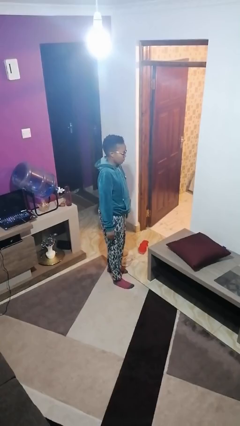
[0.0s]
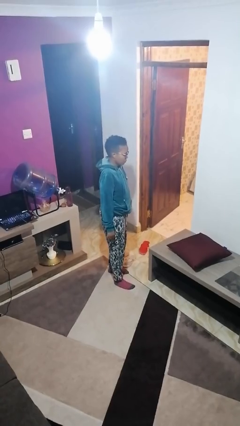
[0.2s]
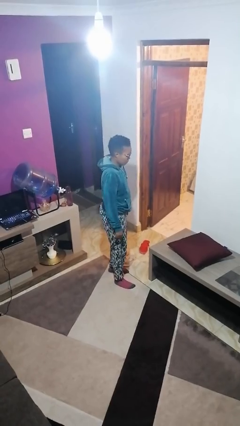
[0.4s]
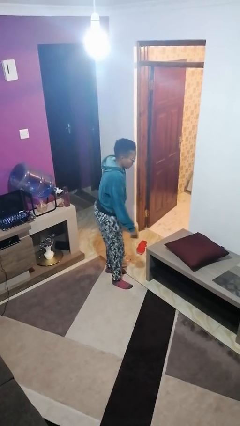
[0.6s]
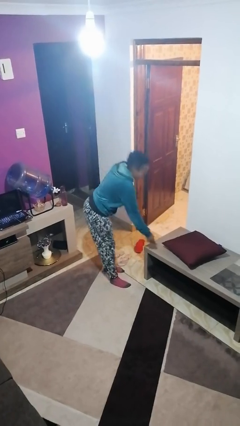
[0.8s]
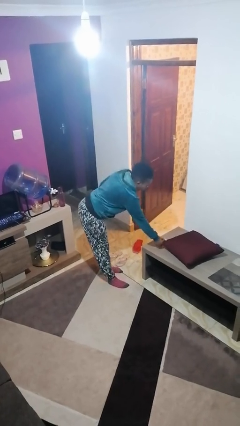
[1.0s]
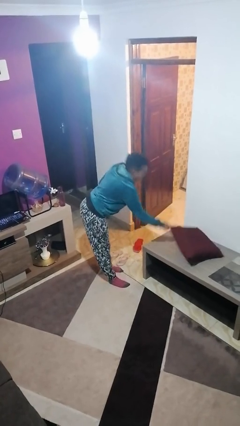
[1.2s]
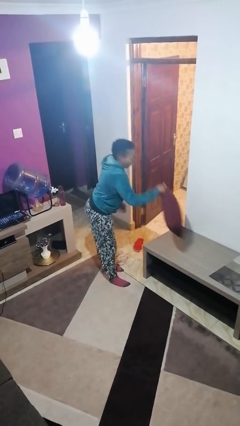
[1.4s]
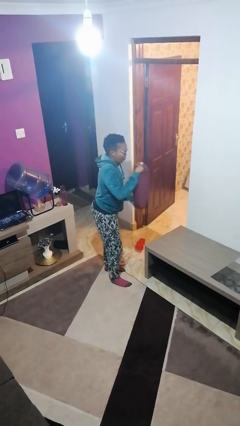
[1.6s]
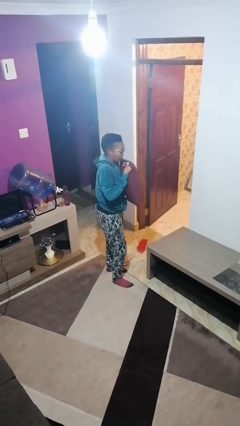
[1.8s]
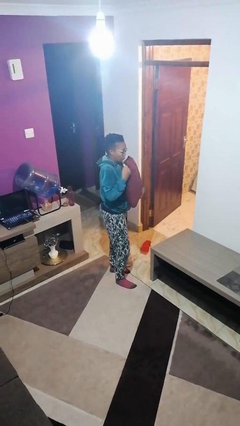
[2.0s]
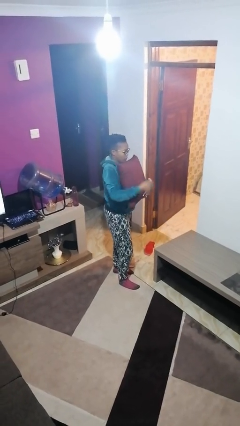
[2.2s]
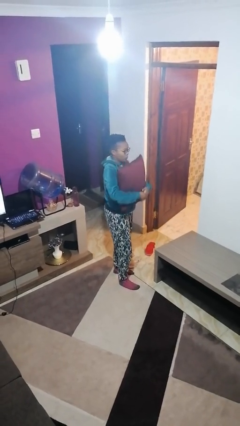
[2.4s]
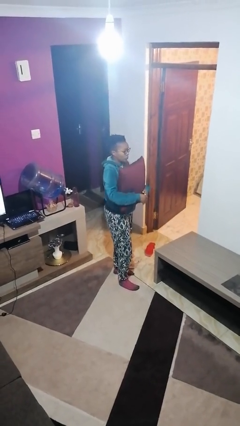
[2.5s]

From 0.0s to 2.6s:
person picks up object from table

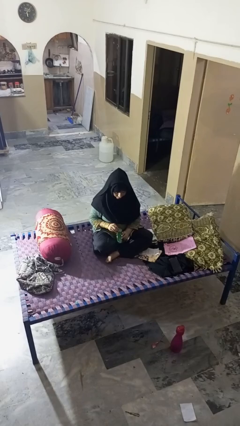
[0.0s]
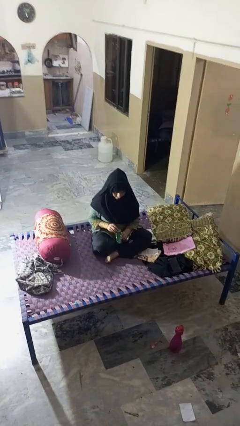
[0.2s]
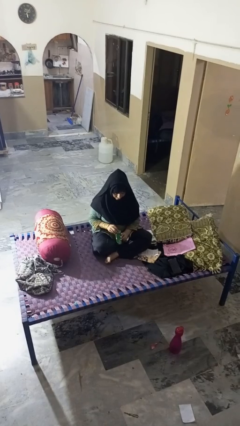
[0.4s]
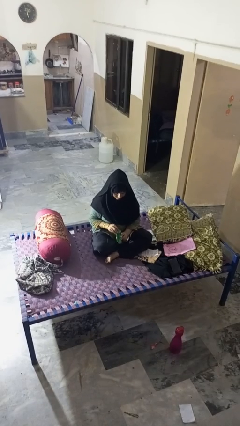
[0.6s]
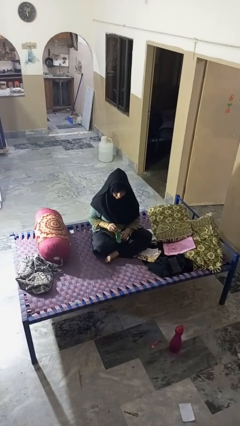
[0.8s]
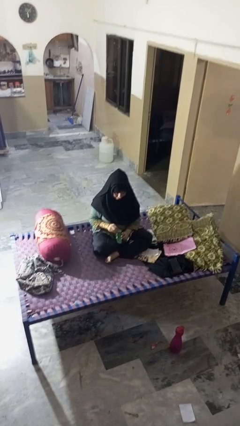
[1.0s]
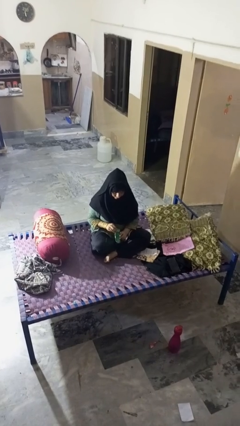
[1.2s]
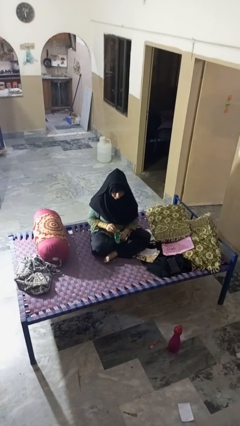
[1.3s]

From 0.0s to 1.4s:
person opens can with can opener

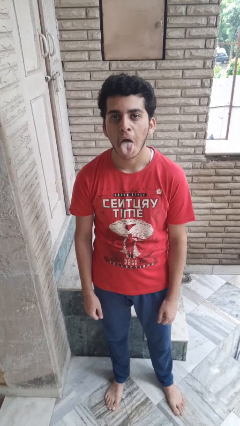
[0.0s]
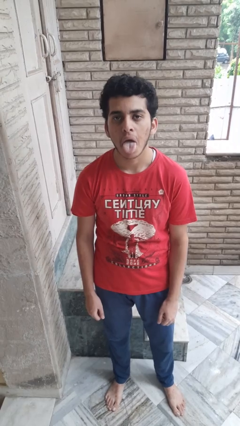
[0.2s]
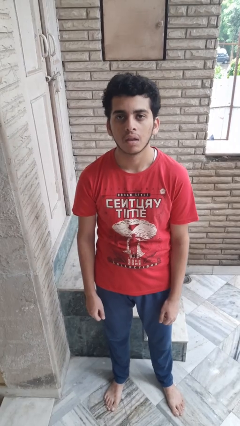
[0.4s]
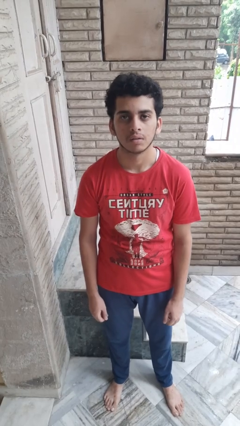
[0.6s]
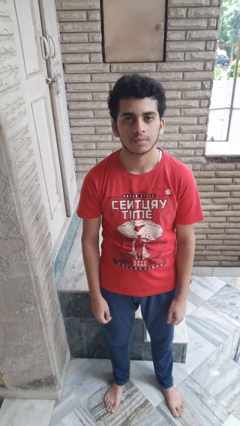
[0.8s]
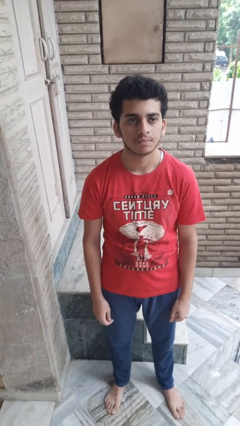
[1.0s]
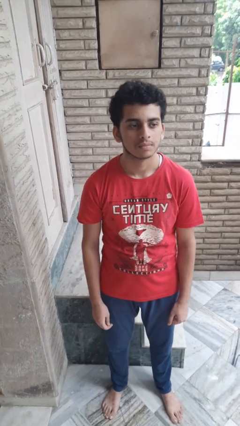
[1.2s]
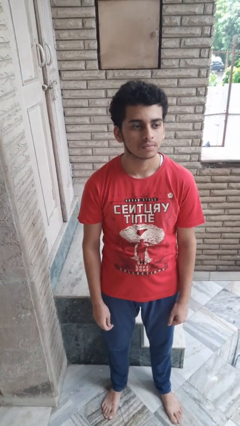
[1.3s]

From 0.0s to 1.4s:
person sticks out tongue

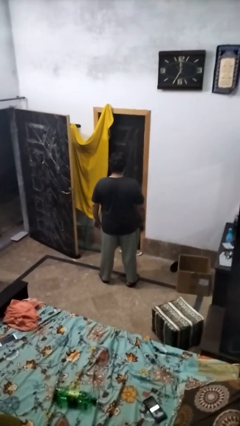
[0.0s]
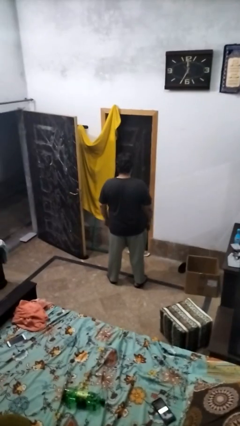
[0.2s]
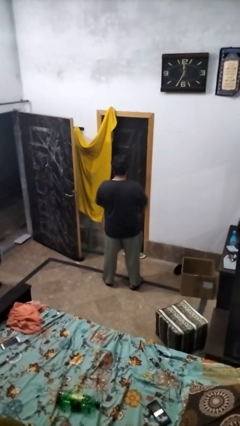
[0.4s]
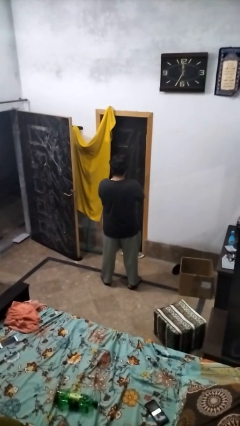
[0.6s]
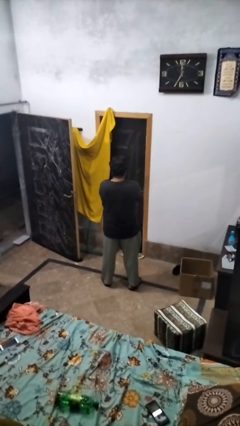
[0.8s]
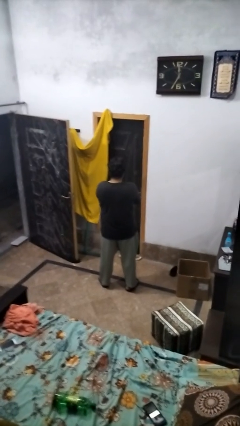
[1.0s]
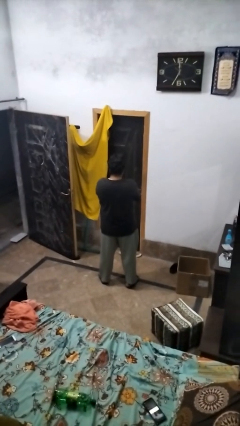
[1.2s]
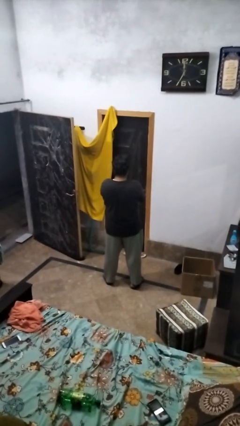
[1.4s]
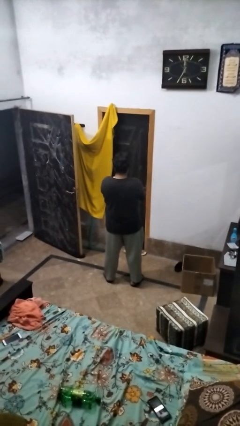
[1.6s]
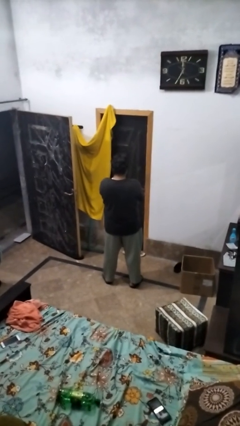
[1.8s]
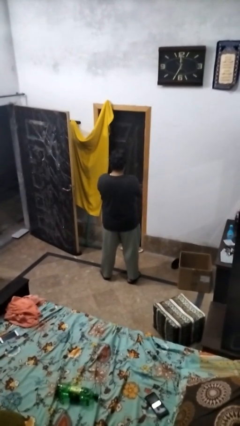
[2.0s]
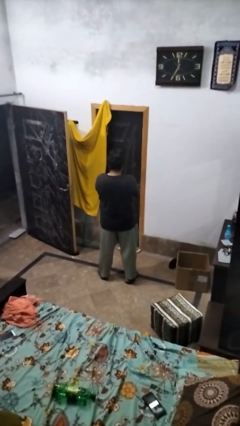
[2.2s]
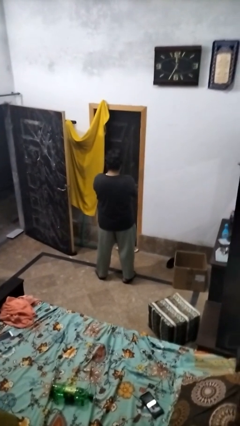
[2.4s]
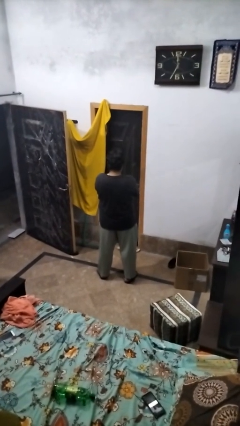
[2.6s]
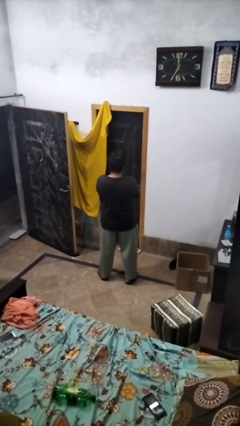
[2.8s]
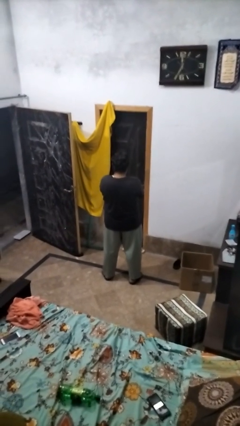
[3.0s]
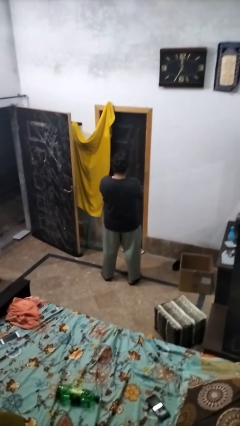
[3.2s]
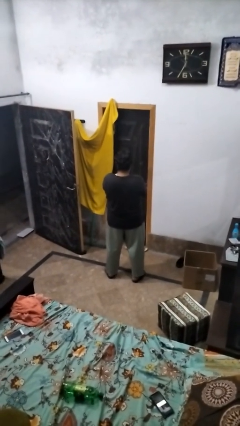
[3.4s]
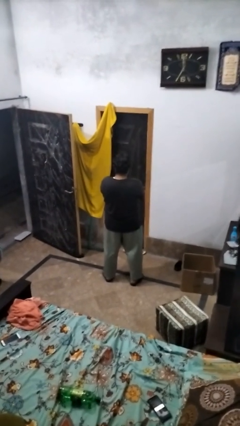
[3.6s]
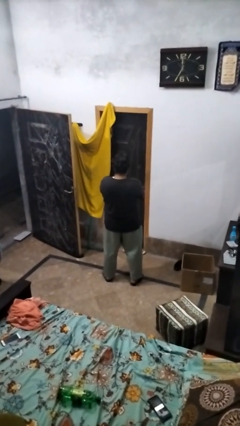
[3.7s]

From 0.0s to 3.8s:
person gestures arms x

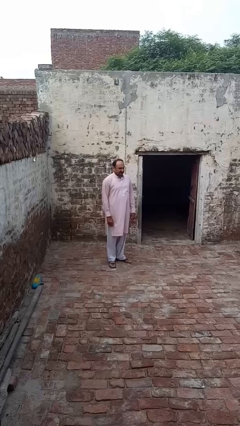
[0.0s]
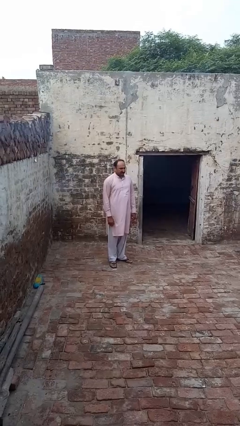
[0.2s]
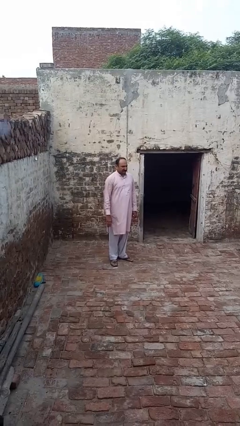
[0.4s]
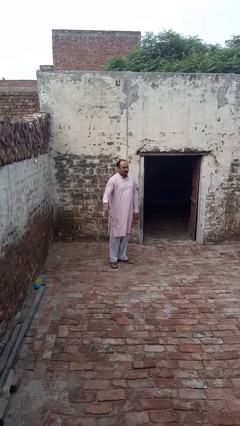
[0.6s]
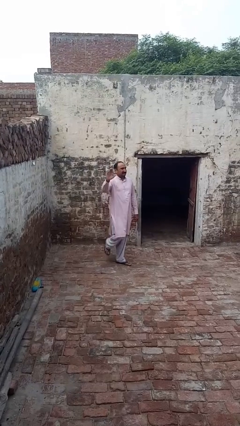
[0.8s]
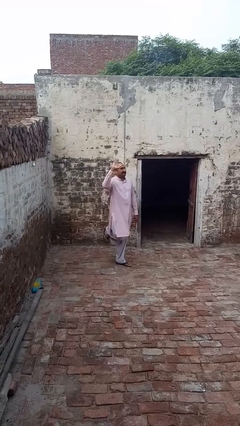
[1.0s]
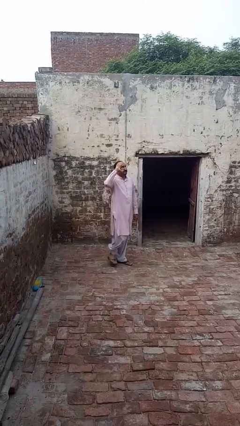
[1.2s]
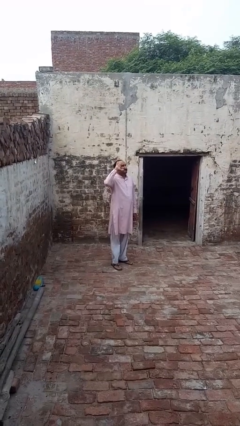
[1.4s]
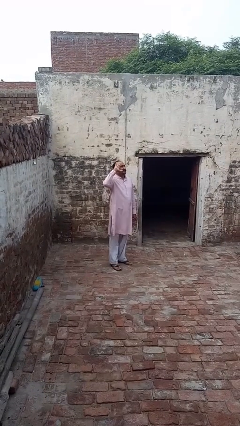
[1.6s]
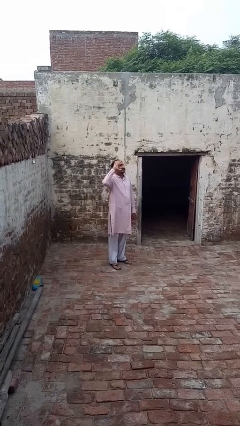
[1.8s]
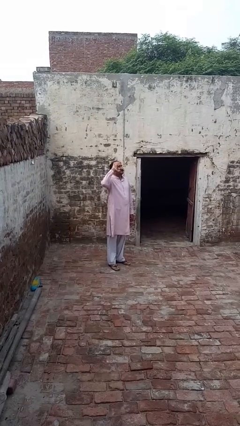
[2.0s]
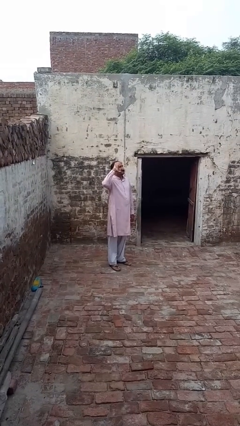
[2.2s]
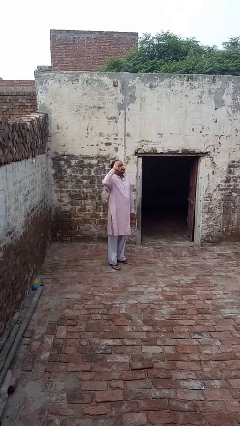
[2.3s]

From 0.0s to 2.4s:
person salutes

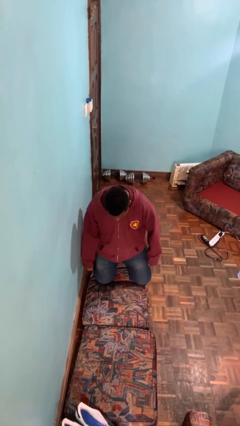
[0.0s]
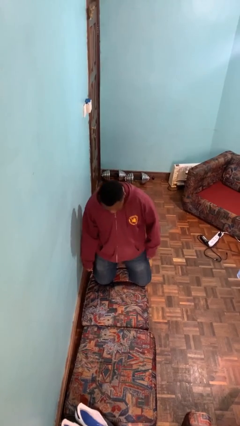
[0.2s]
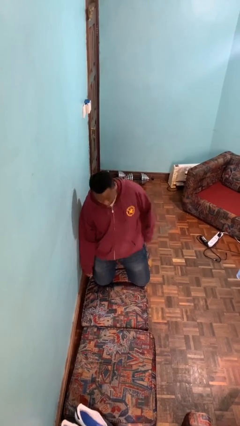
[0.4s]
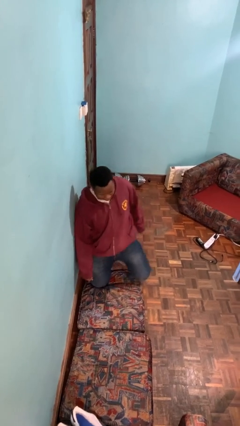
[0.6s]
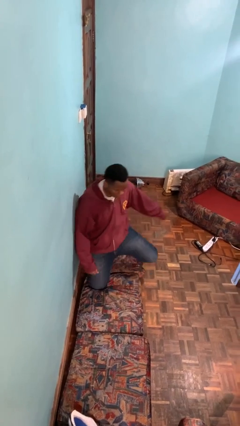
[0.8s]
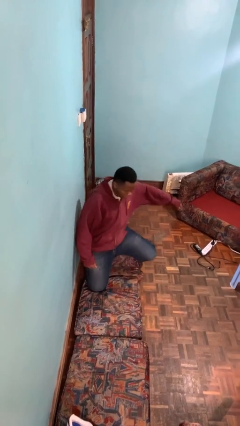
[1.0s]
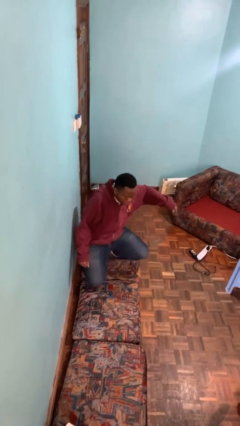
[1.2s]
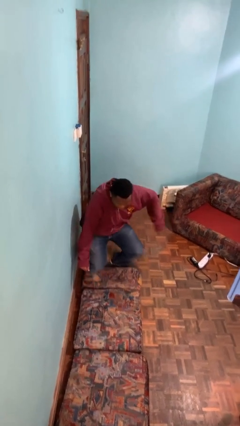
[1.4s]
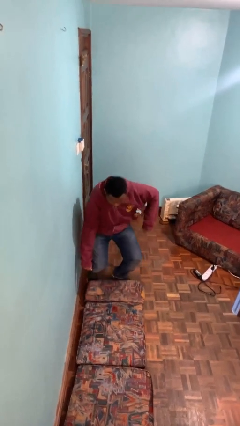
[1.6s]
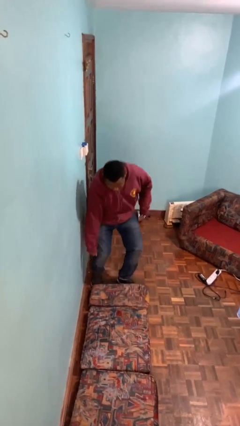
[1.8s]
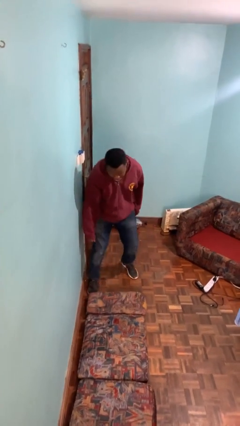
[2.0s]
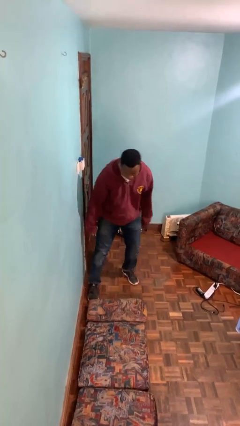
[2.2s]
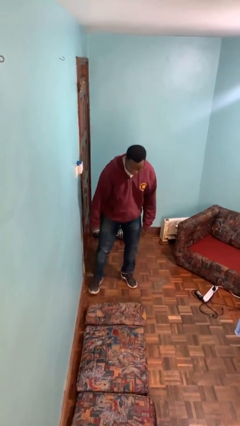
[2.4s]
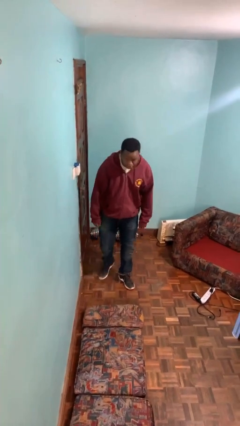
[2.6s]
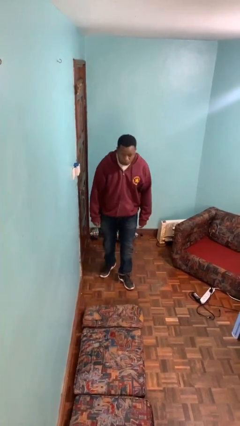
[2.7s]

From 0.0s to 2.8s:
person stands up from floor

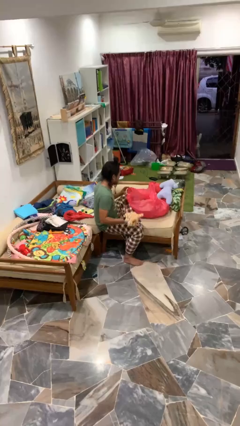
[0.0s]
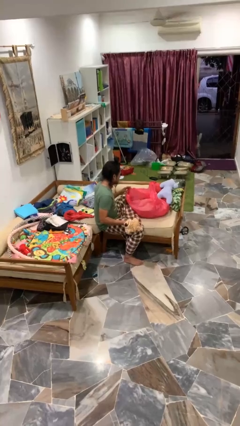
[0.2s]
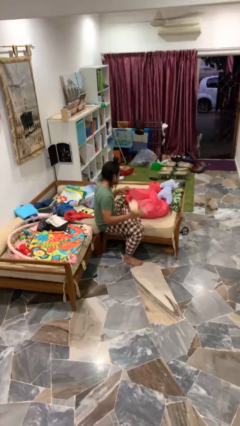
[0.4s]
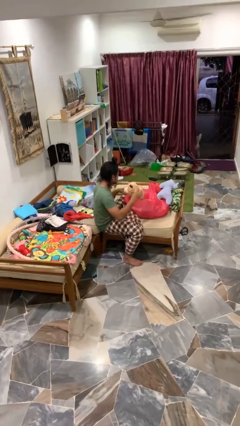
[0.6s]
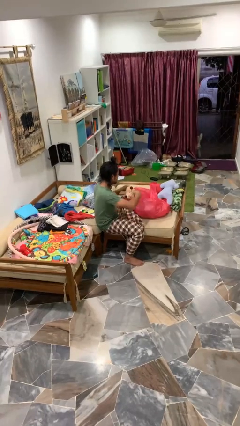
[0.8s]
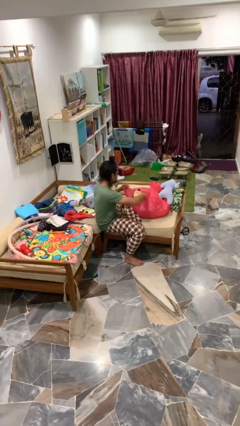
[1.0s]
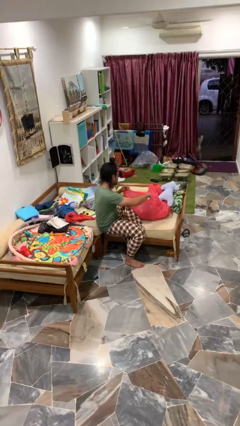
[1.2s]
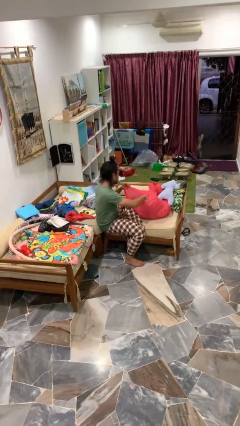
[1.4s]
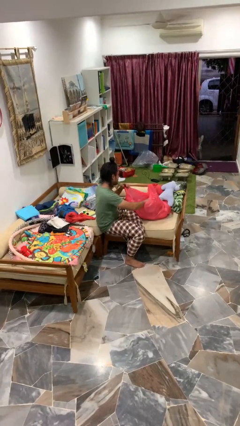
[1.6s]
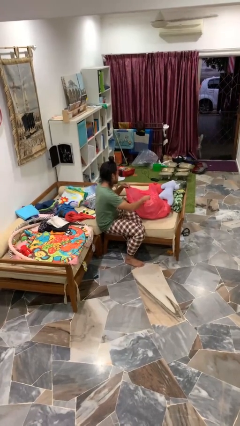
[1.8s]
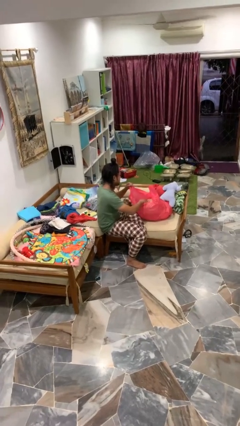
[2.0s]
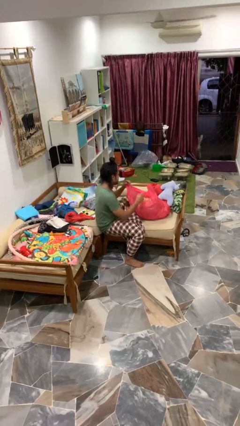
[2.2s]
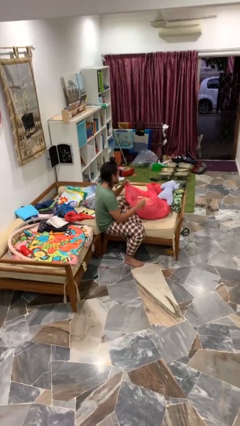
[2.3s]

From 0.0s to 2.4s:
person puts object into bag

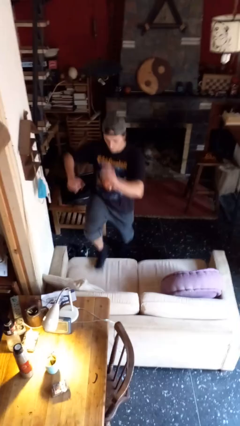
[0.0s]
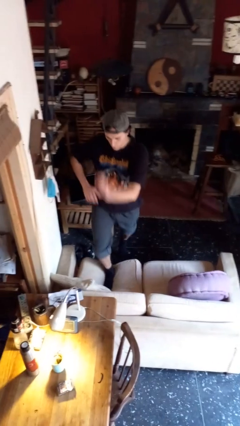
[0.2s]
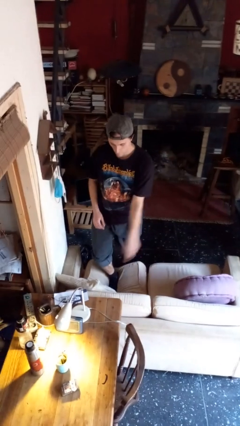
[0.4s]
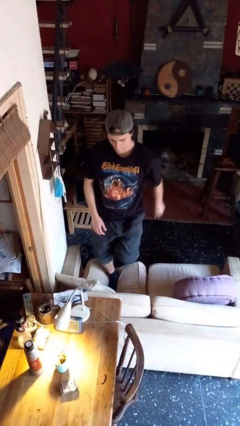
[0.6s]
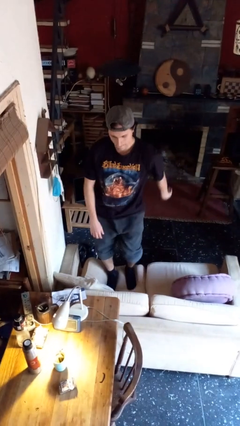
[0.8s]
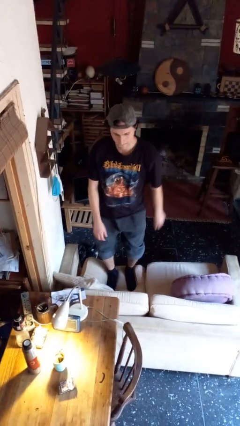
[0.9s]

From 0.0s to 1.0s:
person climbs on couch
